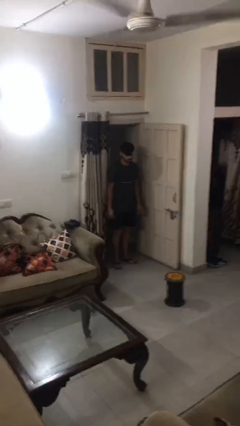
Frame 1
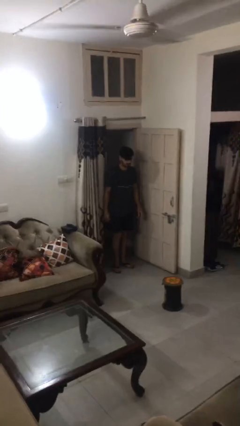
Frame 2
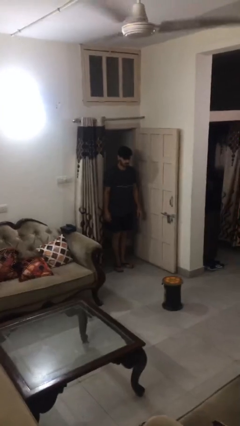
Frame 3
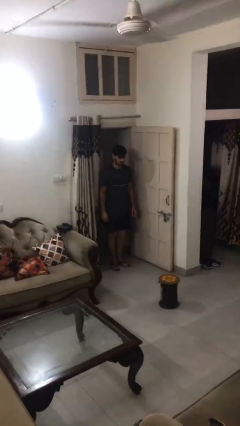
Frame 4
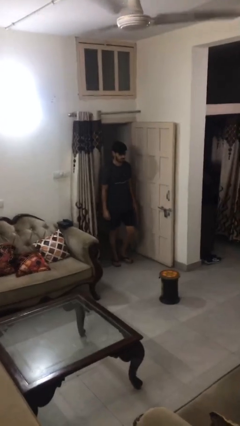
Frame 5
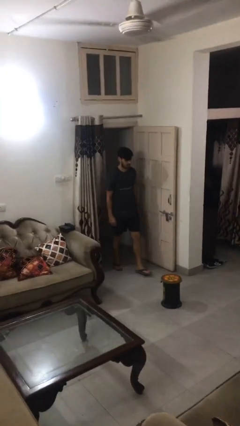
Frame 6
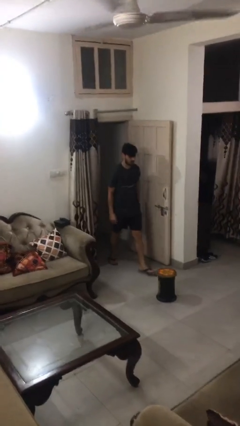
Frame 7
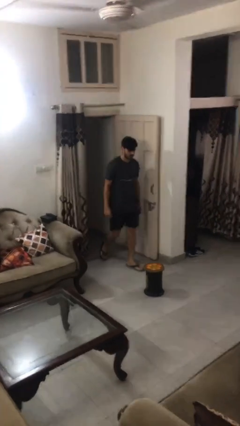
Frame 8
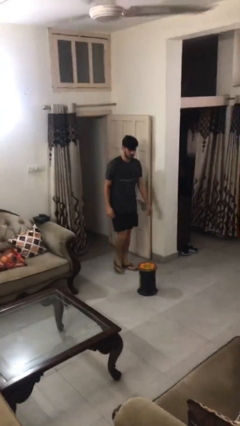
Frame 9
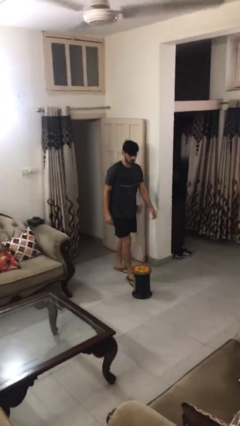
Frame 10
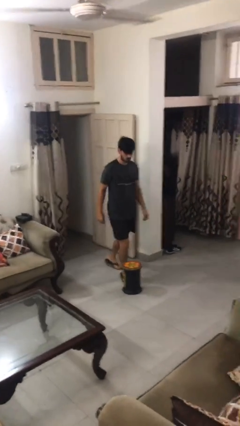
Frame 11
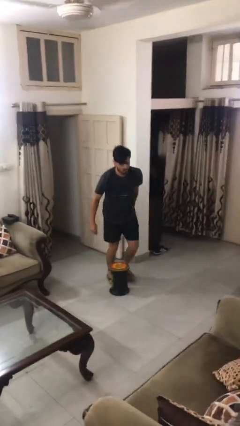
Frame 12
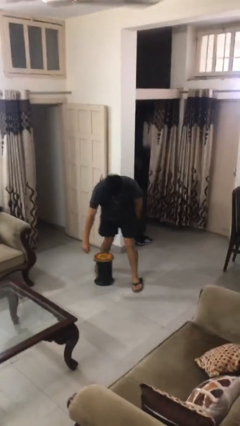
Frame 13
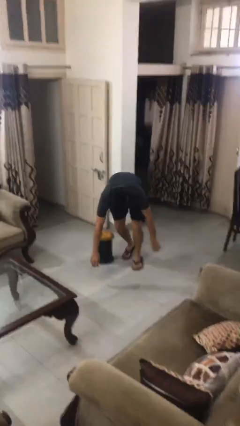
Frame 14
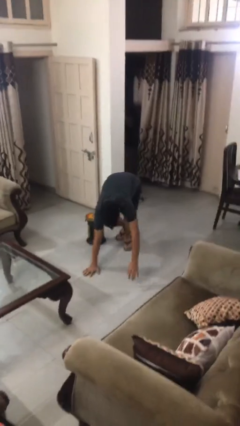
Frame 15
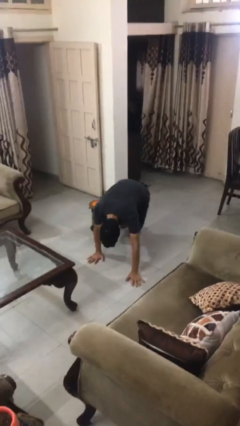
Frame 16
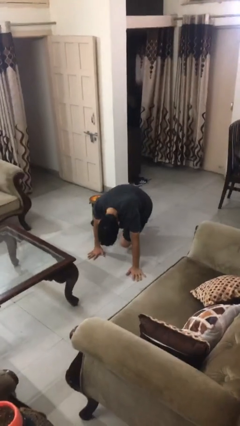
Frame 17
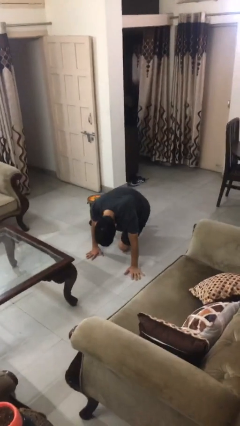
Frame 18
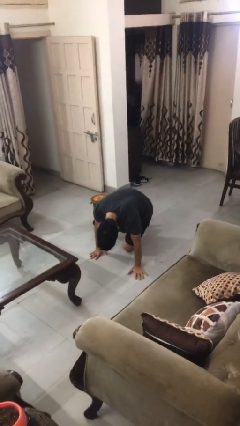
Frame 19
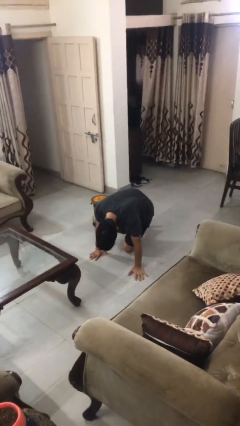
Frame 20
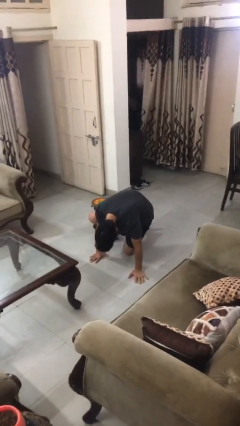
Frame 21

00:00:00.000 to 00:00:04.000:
person trips on object on floor

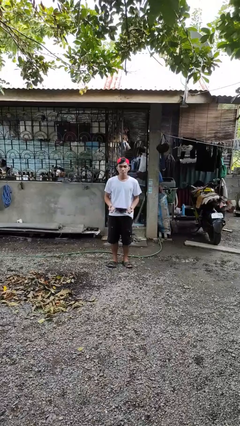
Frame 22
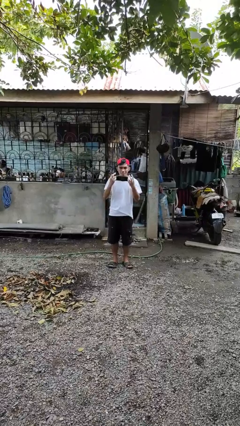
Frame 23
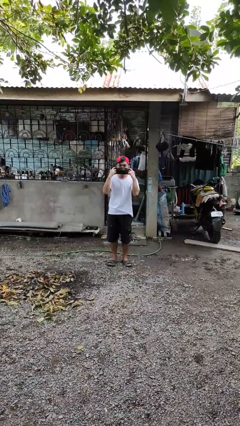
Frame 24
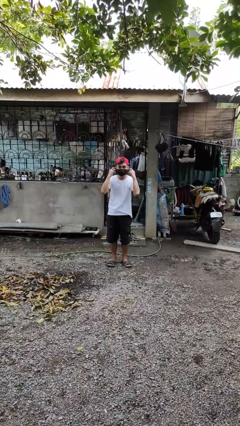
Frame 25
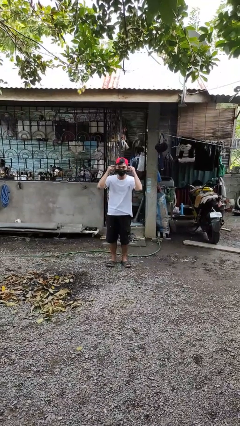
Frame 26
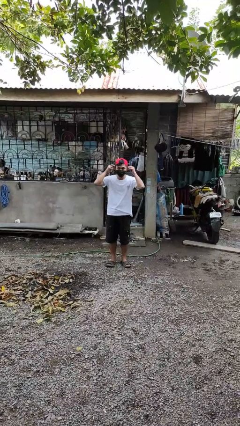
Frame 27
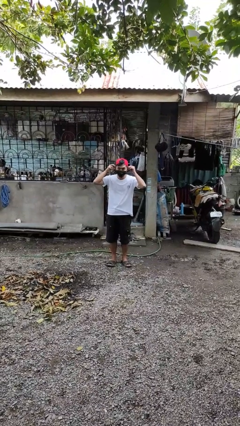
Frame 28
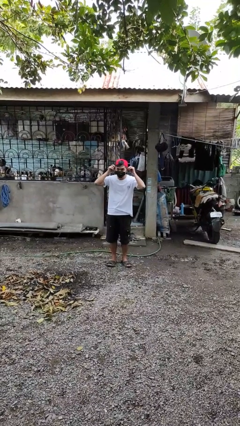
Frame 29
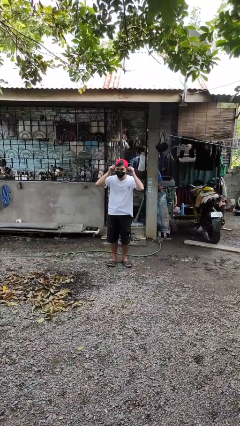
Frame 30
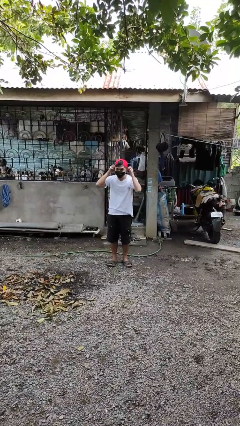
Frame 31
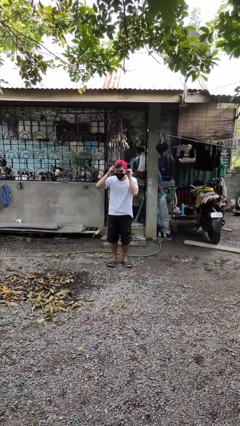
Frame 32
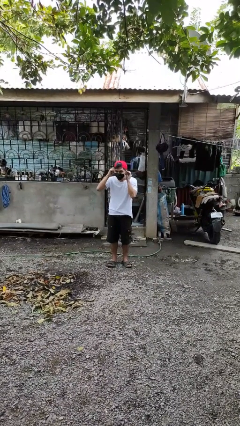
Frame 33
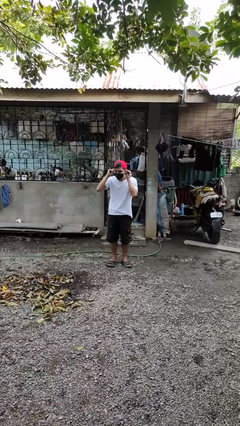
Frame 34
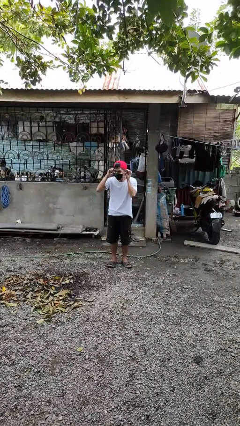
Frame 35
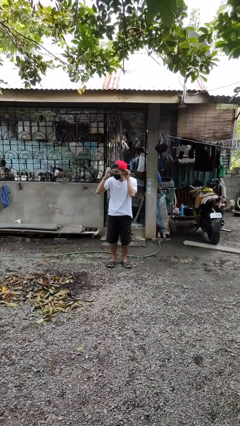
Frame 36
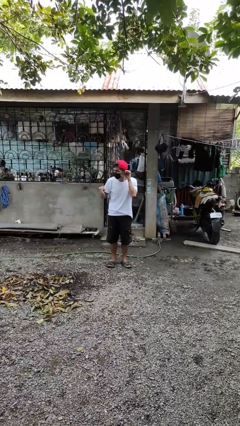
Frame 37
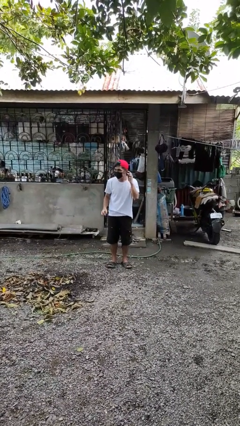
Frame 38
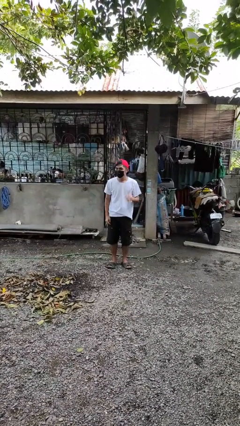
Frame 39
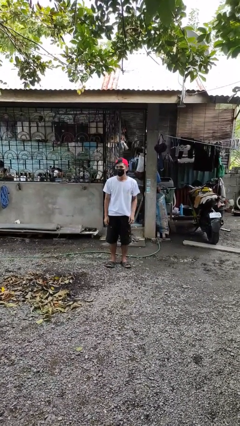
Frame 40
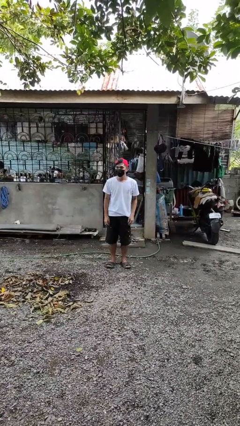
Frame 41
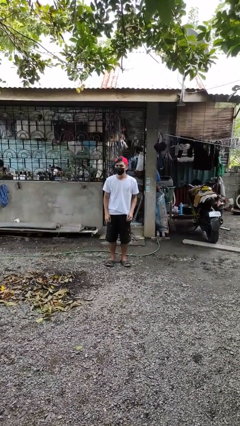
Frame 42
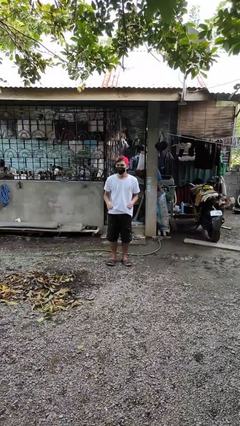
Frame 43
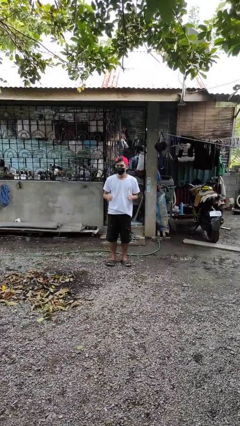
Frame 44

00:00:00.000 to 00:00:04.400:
person puts on facemask

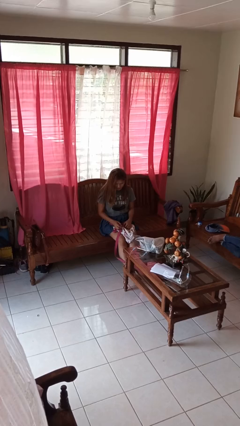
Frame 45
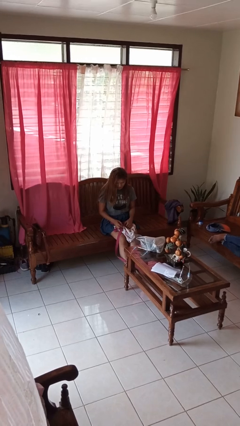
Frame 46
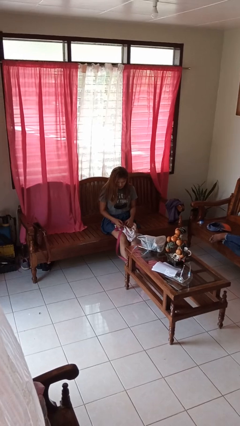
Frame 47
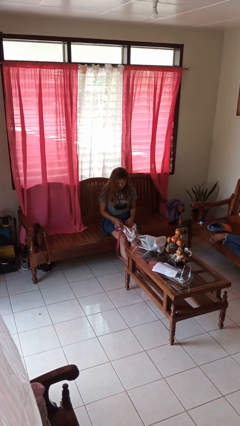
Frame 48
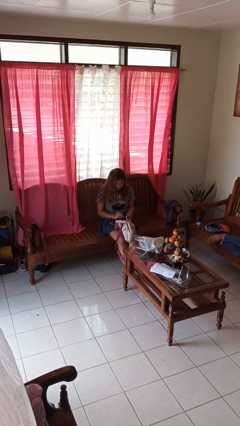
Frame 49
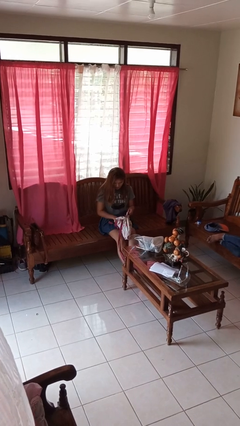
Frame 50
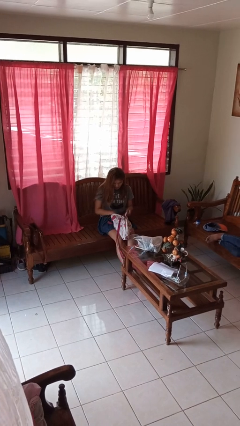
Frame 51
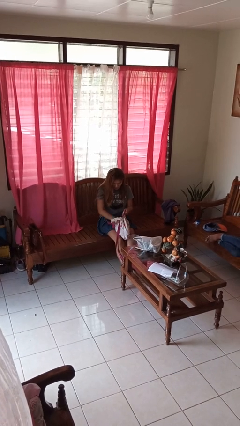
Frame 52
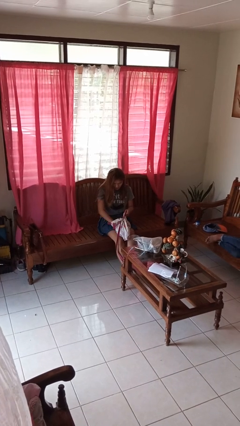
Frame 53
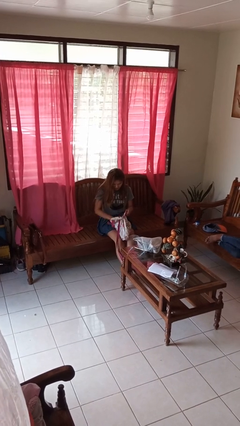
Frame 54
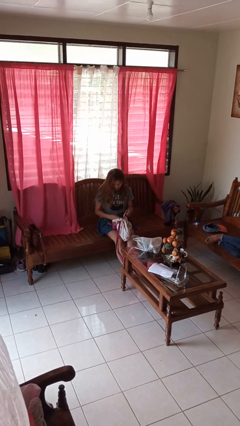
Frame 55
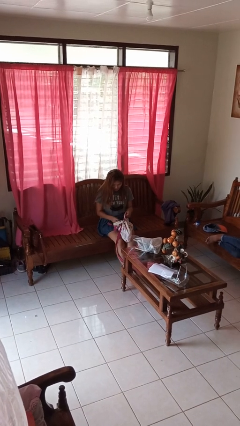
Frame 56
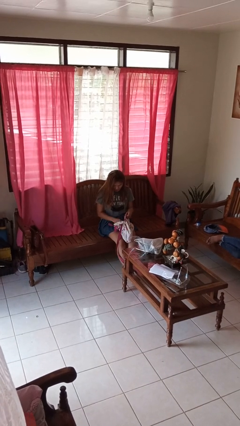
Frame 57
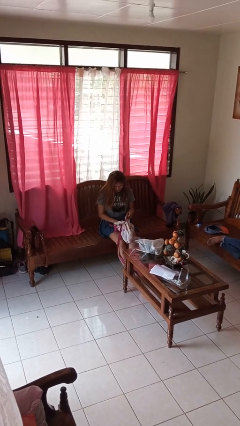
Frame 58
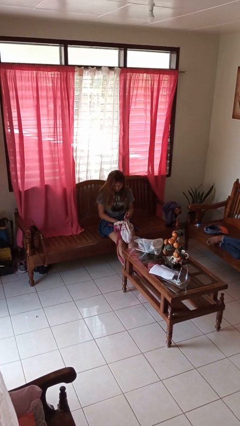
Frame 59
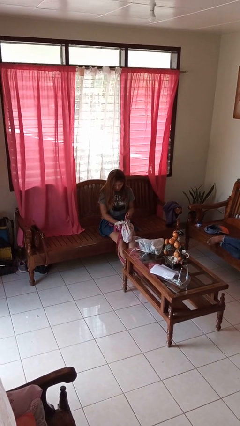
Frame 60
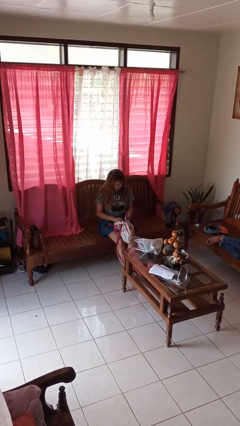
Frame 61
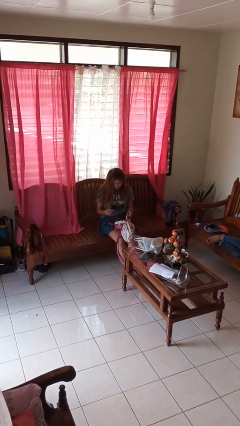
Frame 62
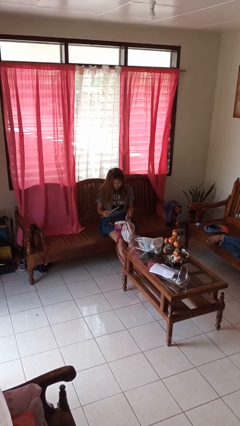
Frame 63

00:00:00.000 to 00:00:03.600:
person searches in backpack

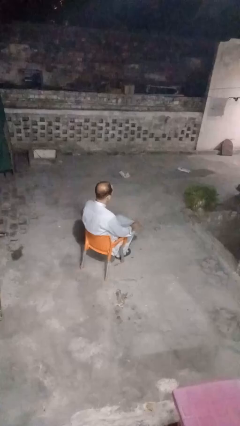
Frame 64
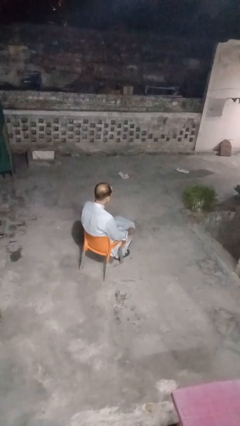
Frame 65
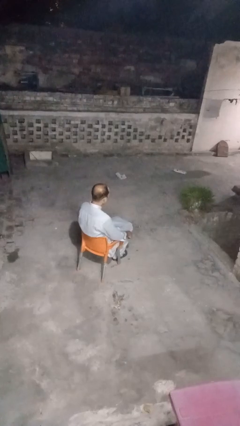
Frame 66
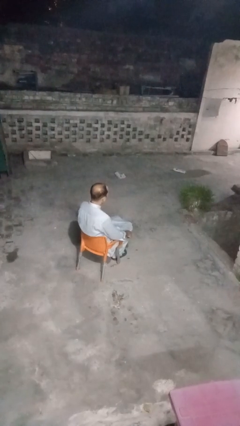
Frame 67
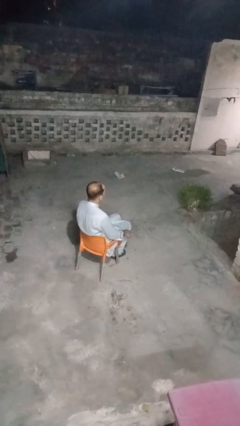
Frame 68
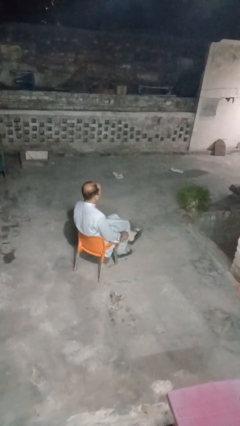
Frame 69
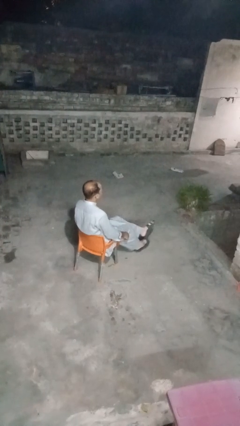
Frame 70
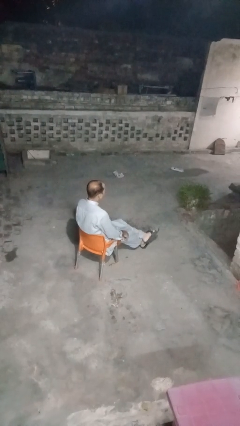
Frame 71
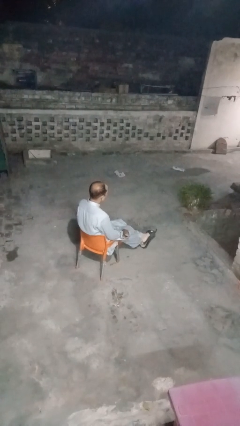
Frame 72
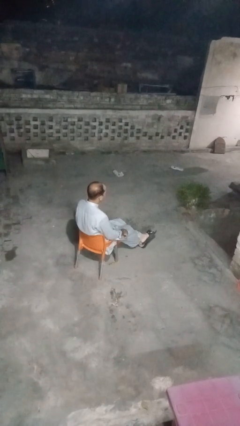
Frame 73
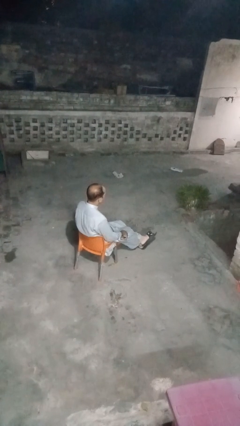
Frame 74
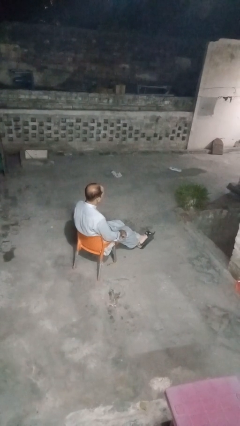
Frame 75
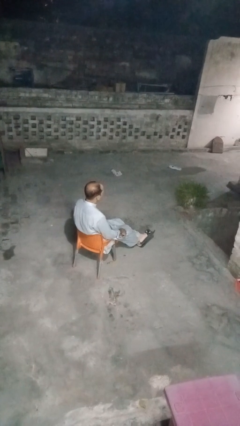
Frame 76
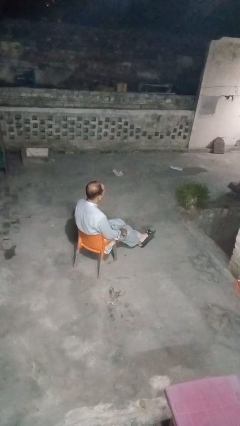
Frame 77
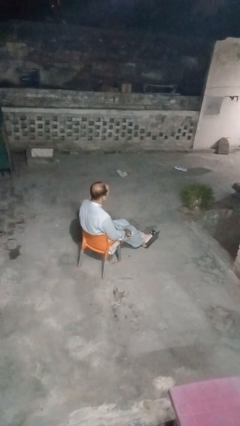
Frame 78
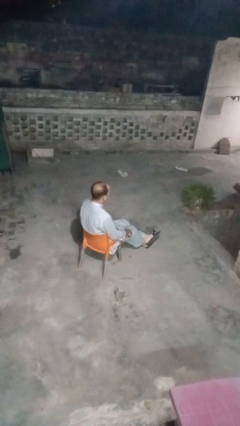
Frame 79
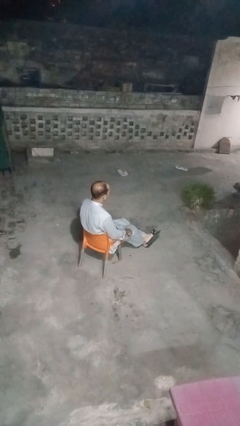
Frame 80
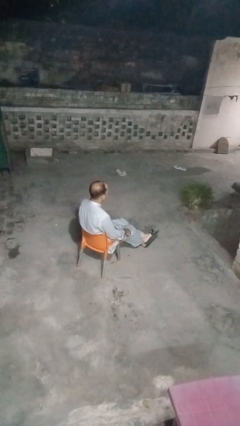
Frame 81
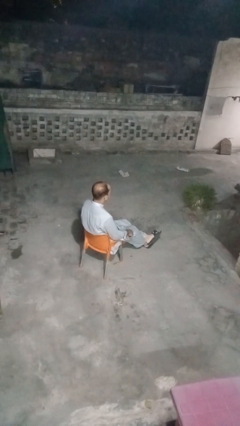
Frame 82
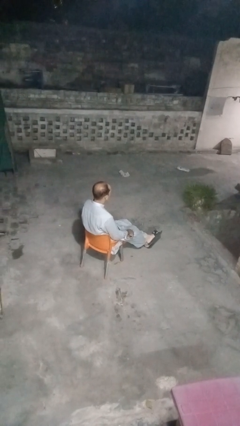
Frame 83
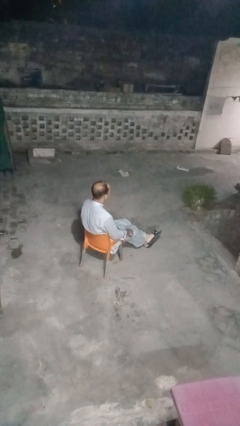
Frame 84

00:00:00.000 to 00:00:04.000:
person crosses legs

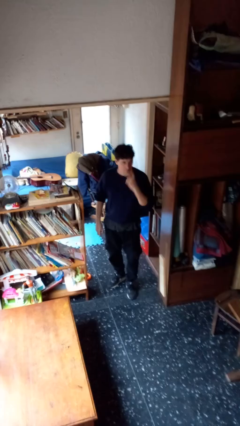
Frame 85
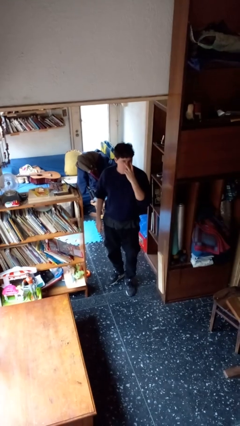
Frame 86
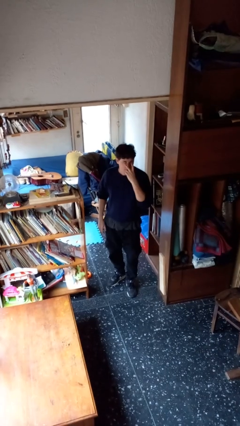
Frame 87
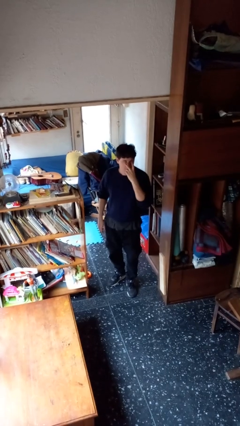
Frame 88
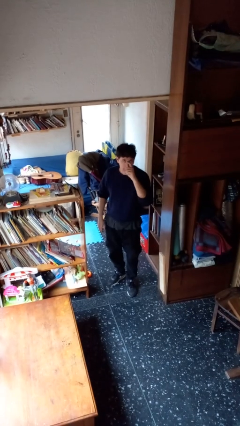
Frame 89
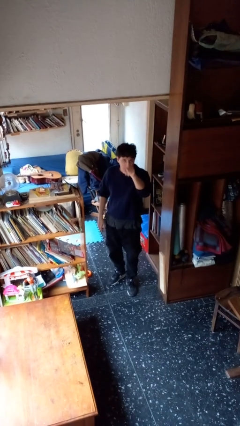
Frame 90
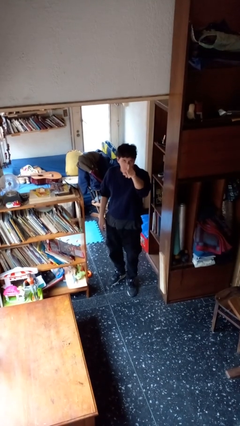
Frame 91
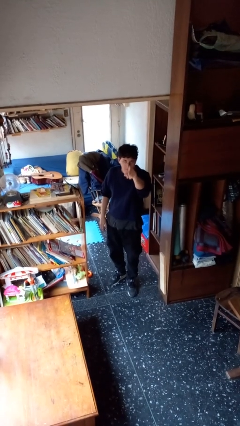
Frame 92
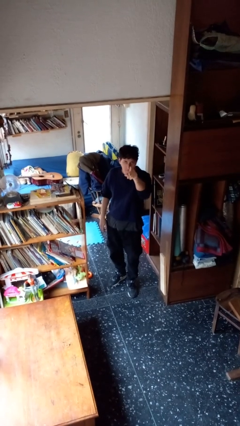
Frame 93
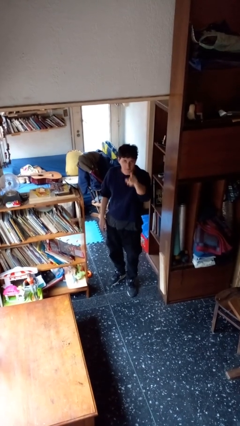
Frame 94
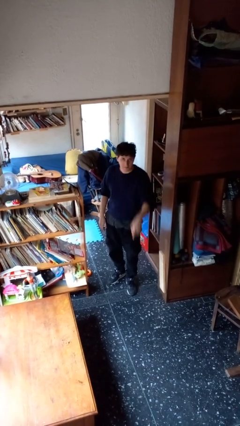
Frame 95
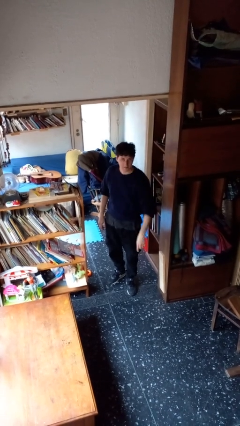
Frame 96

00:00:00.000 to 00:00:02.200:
person gestures watch closely
